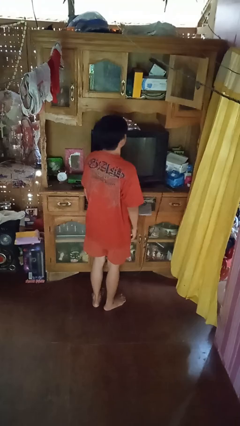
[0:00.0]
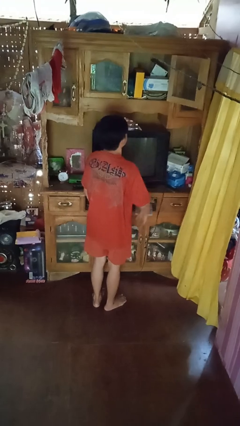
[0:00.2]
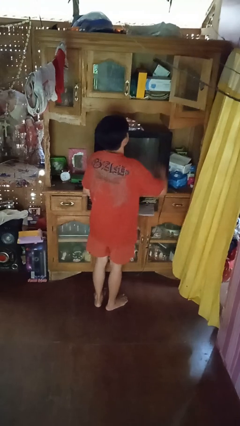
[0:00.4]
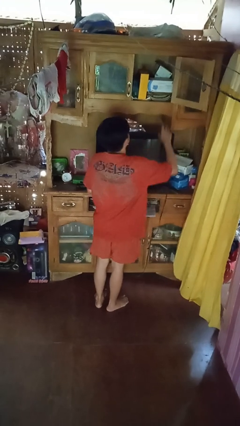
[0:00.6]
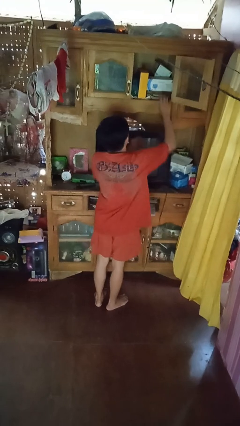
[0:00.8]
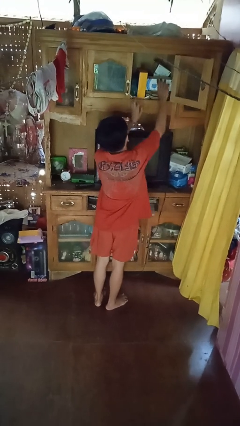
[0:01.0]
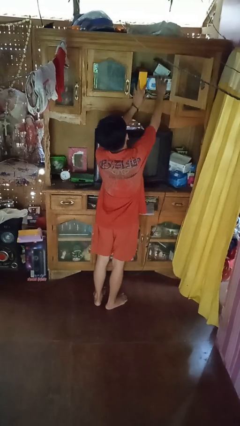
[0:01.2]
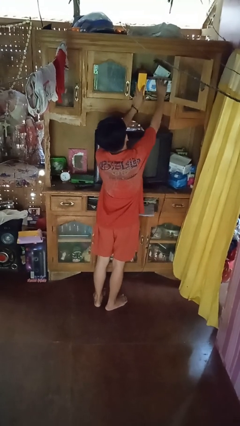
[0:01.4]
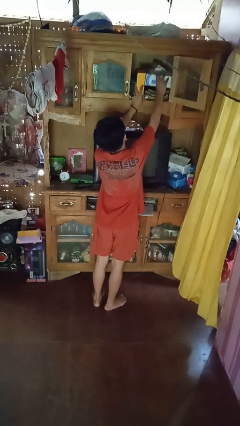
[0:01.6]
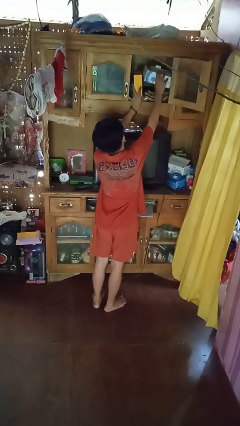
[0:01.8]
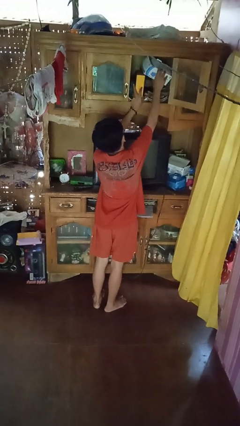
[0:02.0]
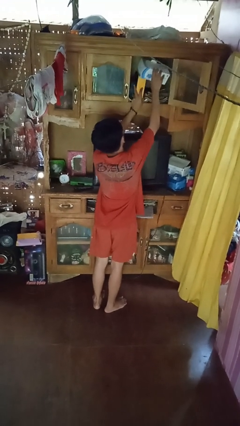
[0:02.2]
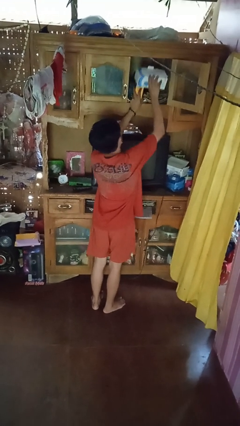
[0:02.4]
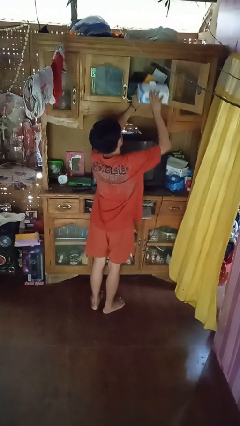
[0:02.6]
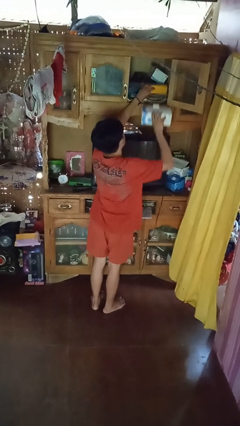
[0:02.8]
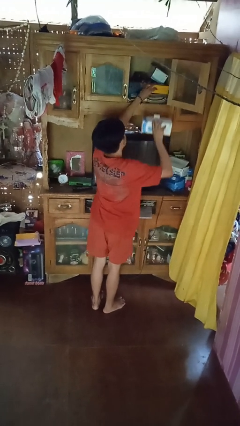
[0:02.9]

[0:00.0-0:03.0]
person picks up object from shelf

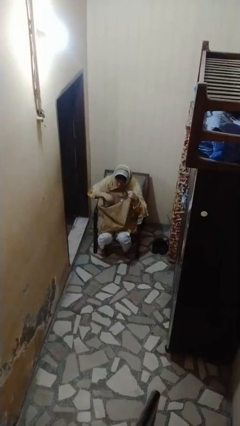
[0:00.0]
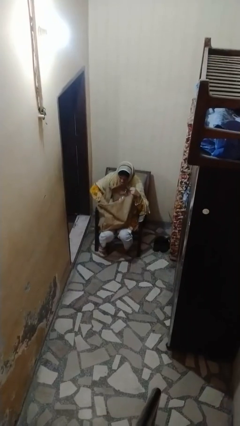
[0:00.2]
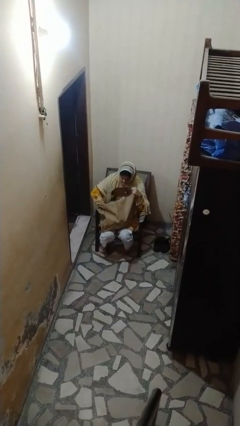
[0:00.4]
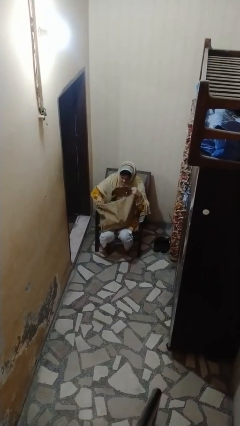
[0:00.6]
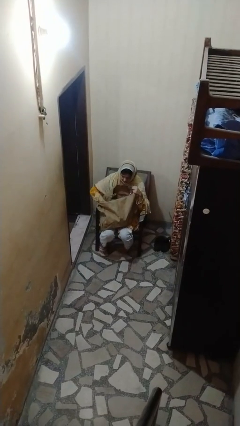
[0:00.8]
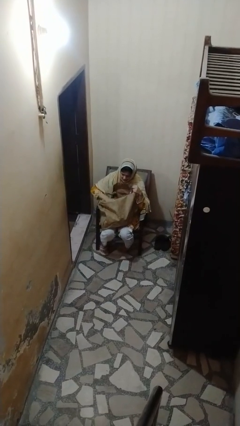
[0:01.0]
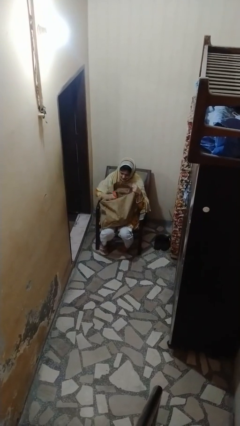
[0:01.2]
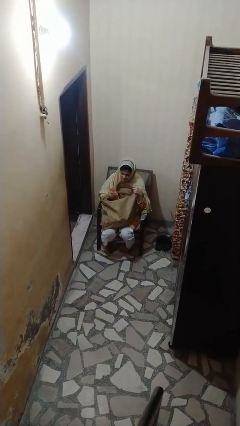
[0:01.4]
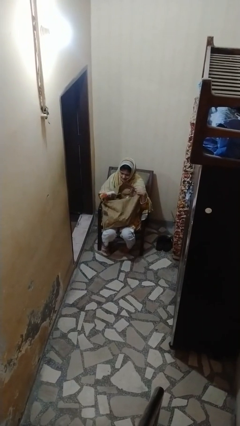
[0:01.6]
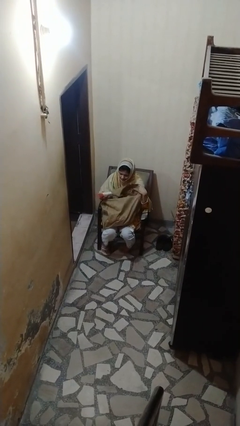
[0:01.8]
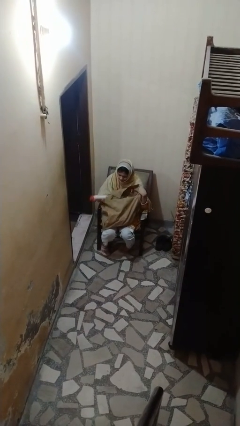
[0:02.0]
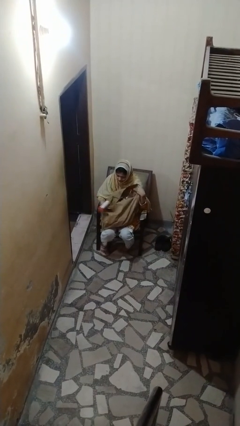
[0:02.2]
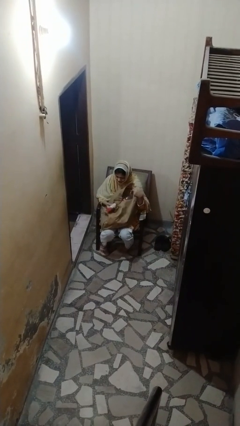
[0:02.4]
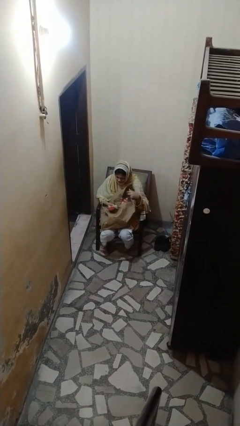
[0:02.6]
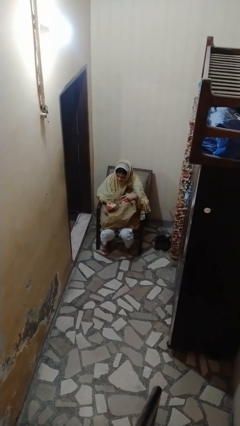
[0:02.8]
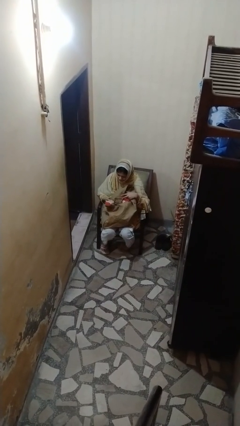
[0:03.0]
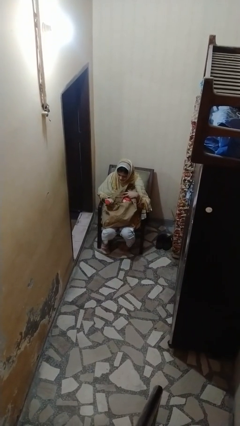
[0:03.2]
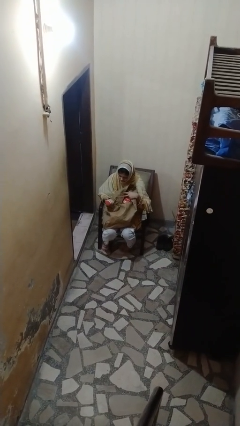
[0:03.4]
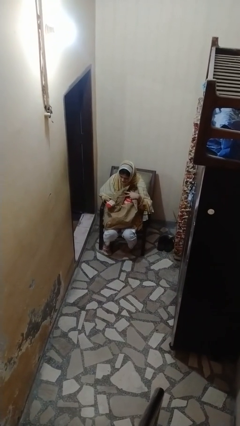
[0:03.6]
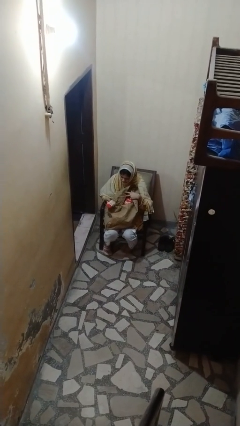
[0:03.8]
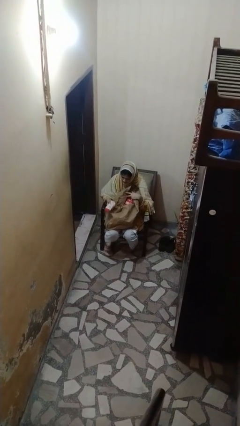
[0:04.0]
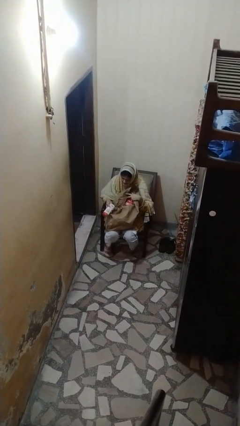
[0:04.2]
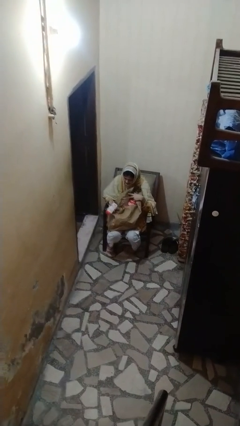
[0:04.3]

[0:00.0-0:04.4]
person takes object from bag

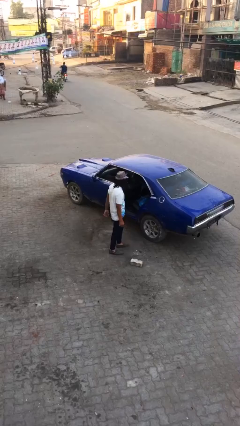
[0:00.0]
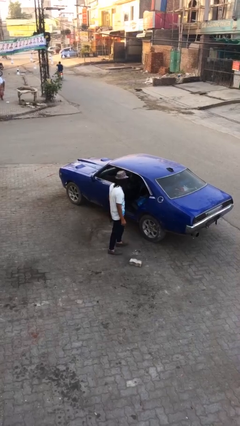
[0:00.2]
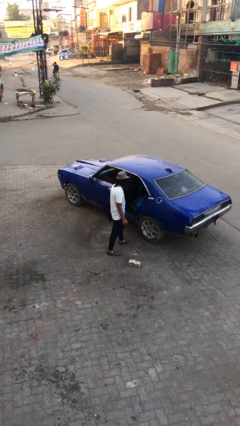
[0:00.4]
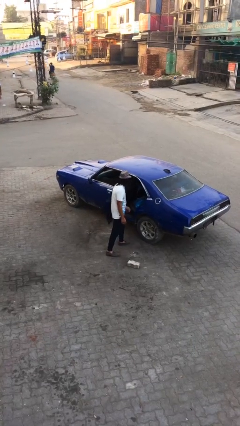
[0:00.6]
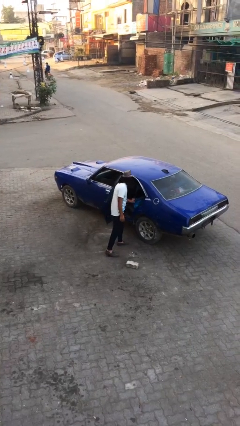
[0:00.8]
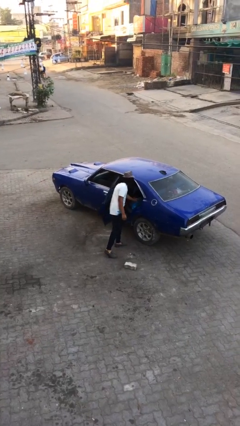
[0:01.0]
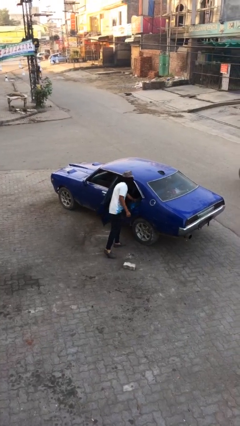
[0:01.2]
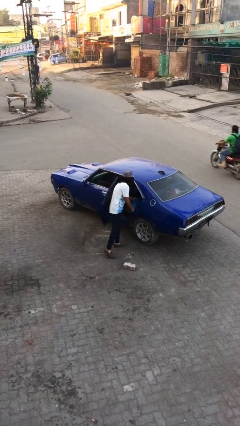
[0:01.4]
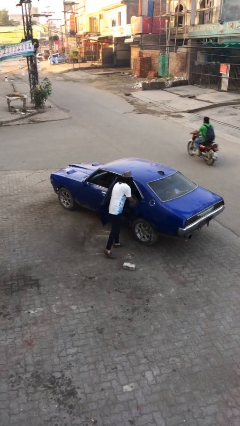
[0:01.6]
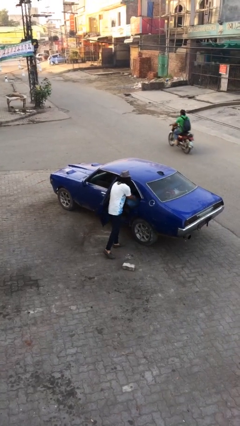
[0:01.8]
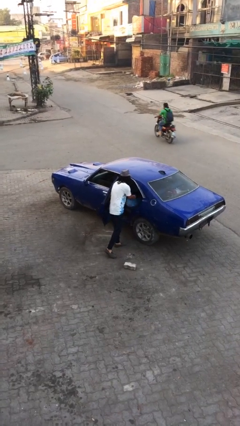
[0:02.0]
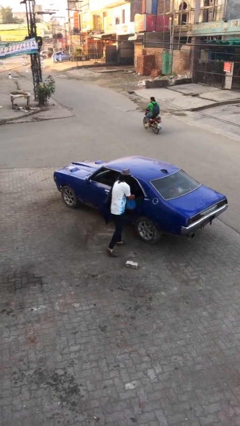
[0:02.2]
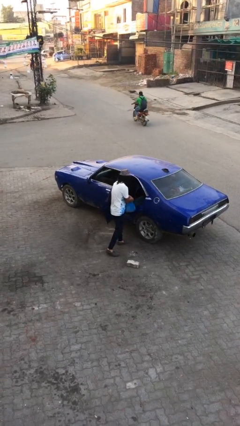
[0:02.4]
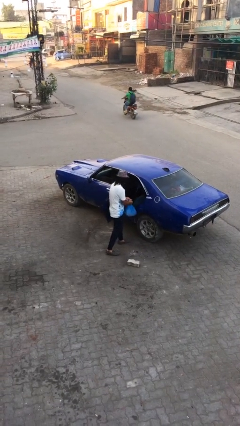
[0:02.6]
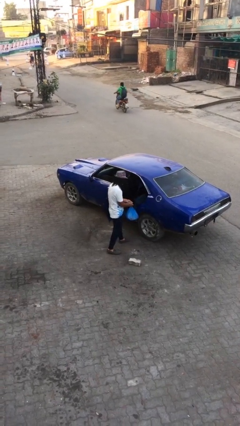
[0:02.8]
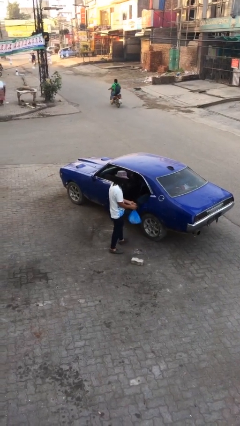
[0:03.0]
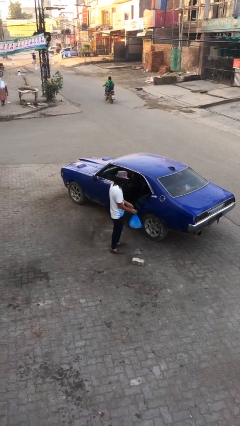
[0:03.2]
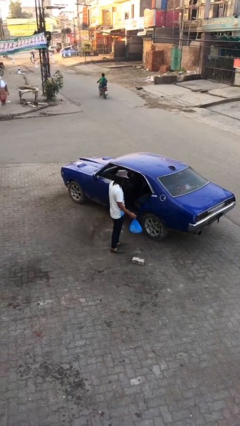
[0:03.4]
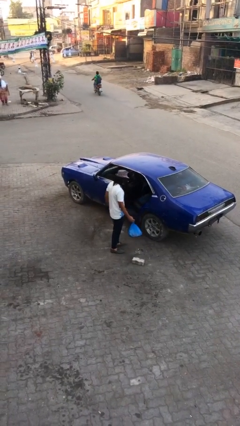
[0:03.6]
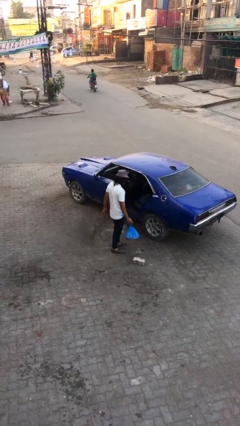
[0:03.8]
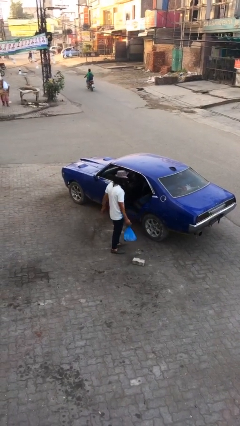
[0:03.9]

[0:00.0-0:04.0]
person unloads car

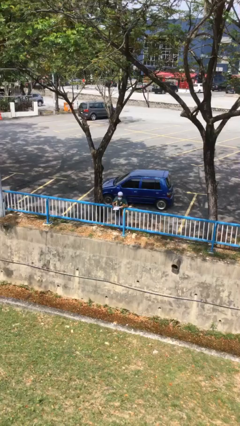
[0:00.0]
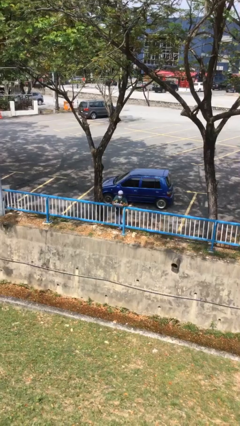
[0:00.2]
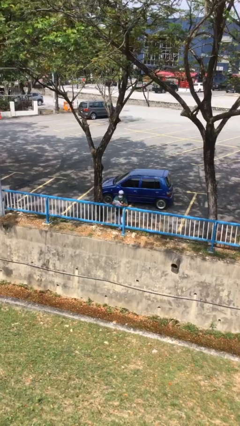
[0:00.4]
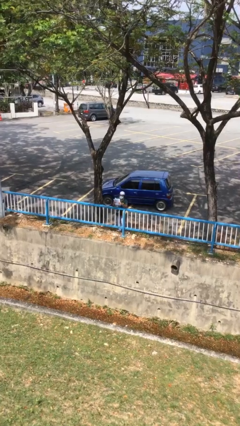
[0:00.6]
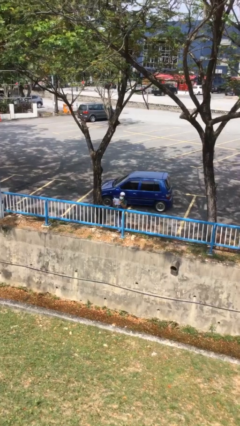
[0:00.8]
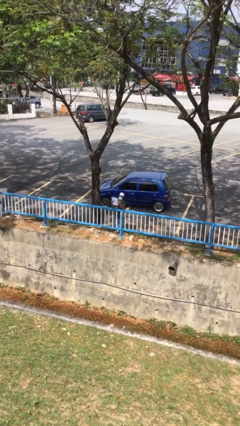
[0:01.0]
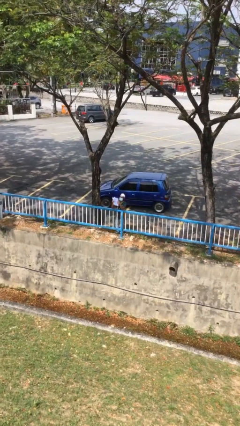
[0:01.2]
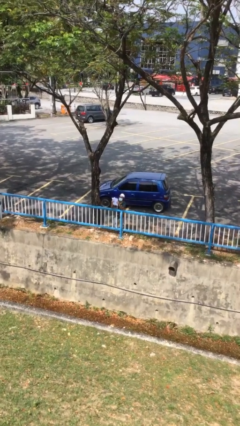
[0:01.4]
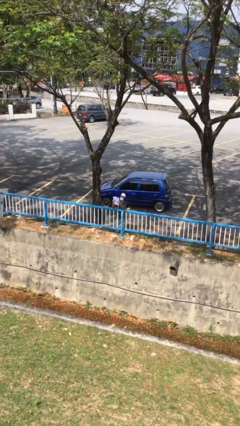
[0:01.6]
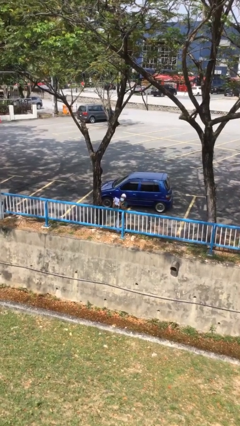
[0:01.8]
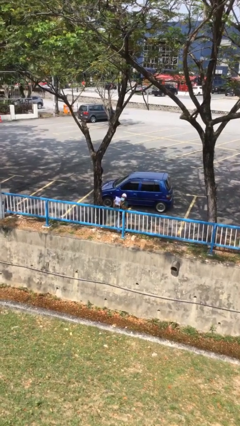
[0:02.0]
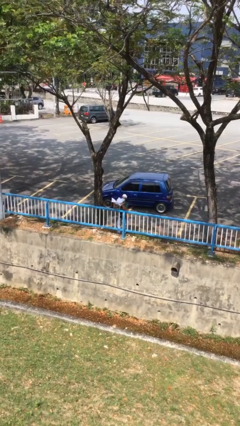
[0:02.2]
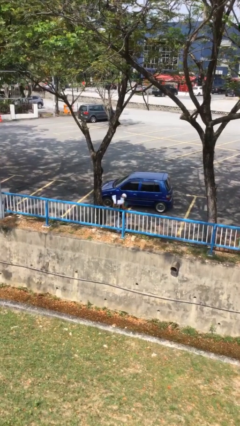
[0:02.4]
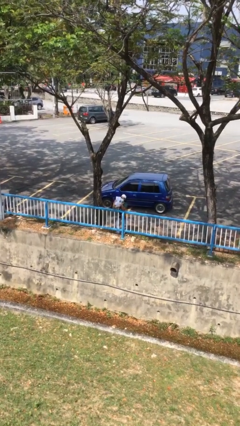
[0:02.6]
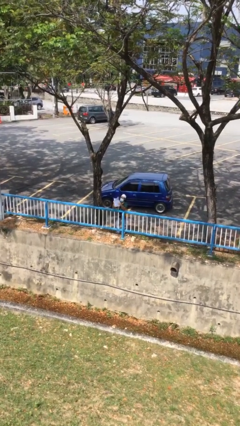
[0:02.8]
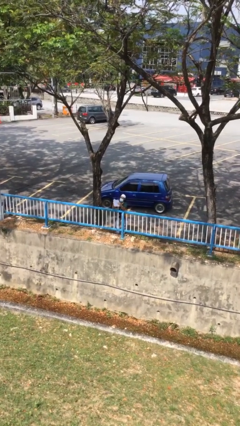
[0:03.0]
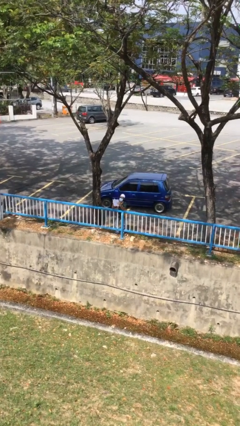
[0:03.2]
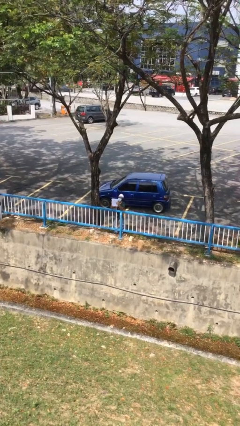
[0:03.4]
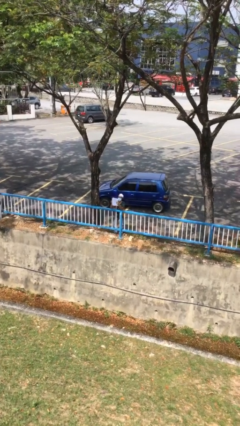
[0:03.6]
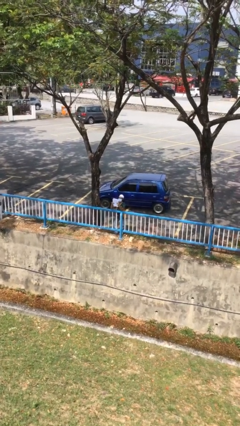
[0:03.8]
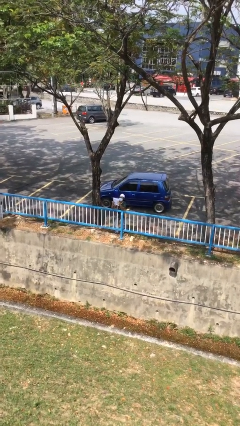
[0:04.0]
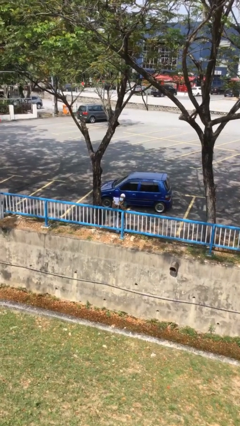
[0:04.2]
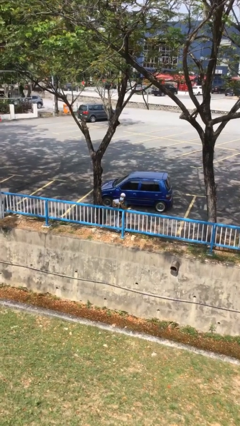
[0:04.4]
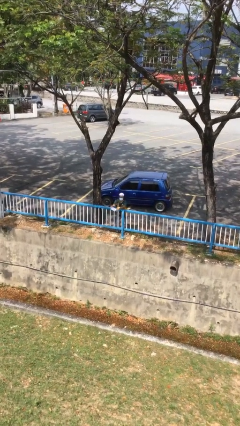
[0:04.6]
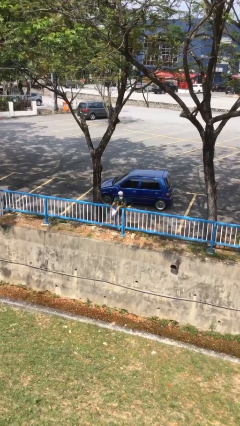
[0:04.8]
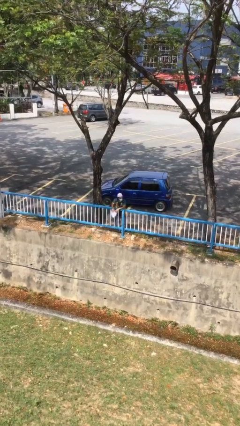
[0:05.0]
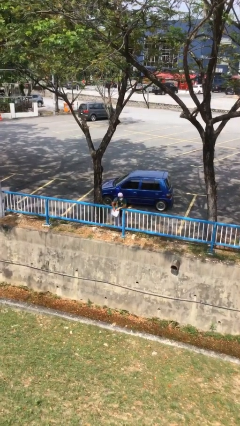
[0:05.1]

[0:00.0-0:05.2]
person reads document

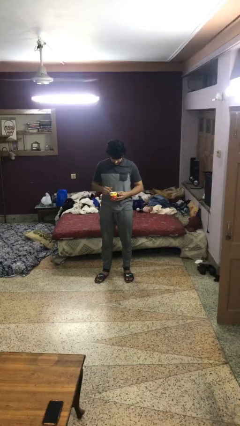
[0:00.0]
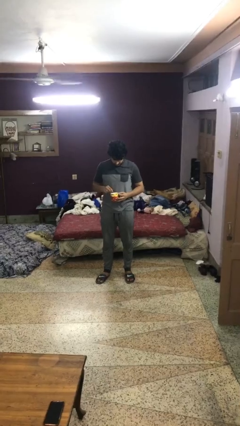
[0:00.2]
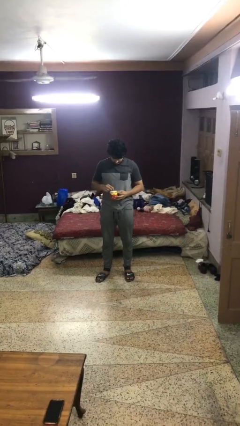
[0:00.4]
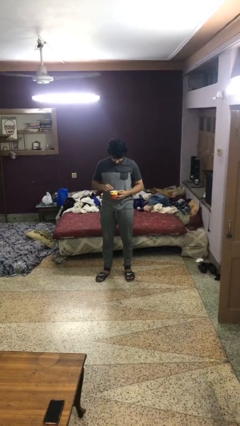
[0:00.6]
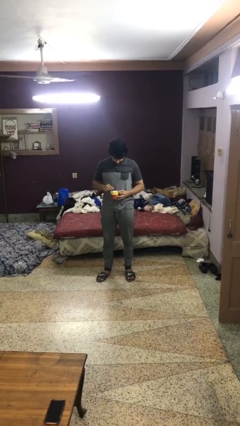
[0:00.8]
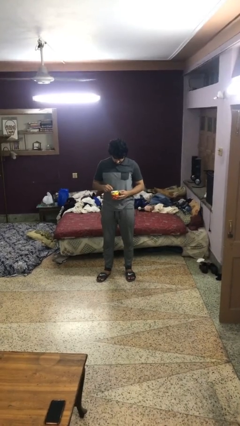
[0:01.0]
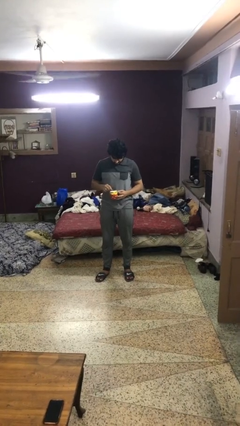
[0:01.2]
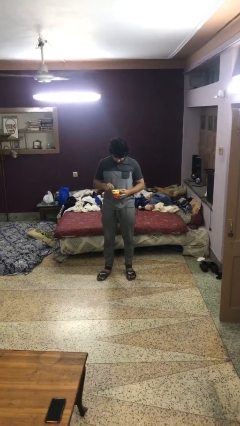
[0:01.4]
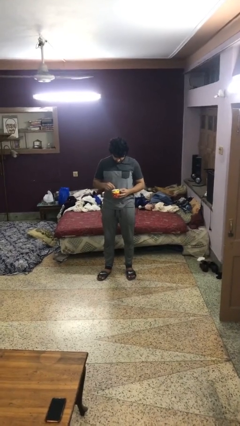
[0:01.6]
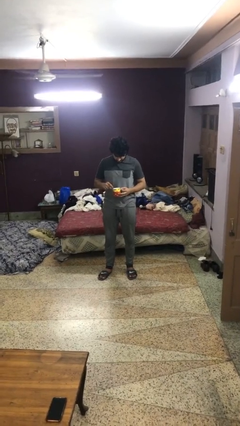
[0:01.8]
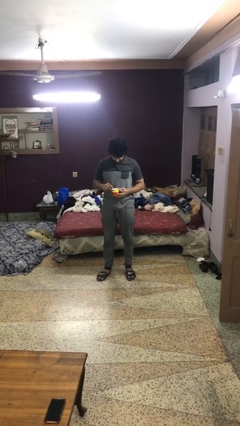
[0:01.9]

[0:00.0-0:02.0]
person stirs mug
